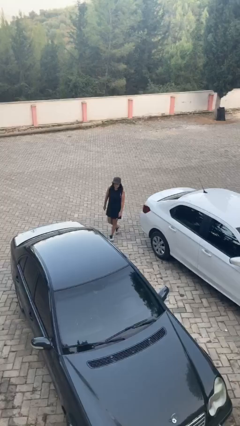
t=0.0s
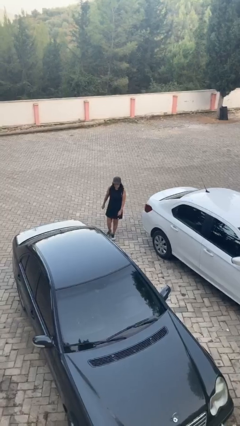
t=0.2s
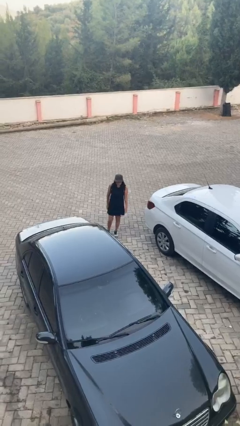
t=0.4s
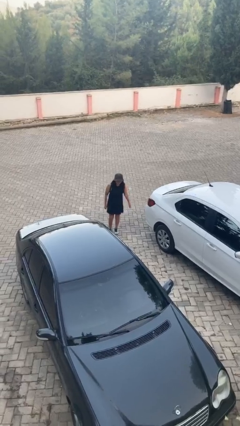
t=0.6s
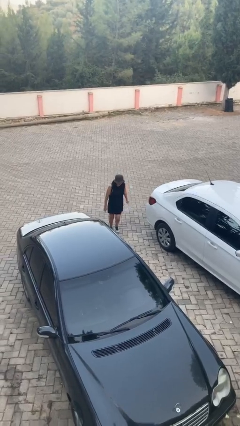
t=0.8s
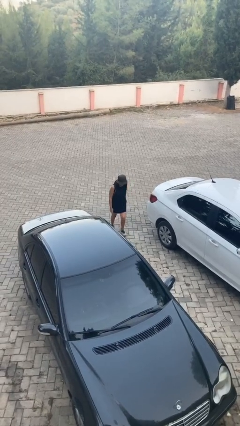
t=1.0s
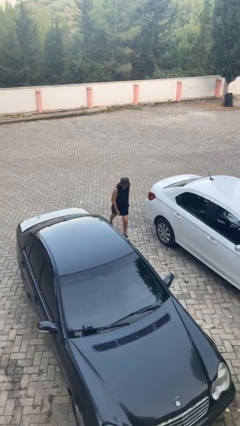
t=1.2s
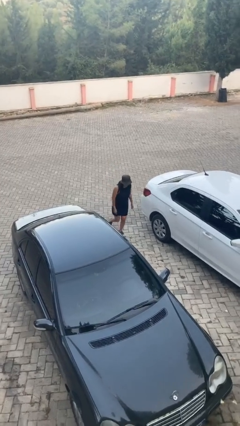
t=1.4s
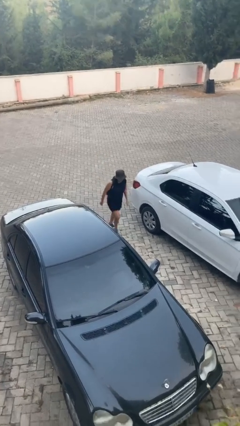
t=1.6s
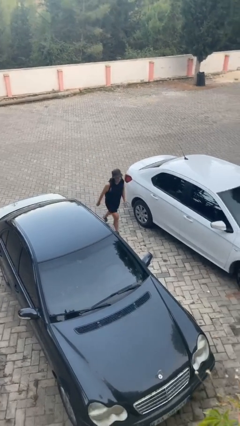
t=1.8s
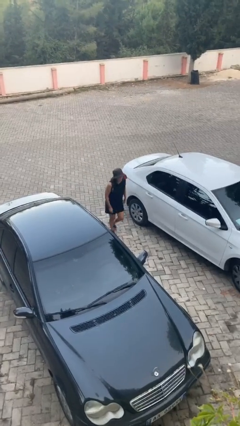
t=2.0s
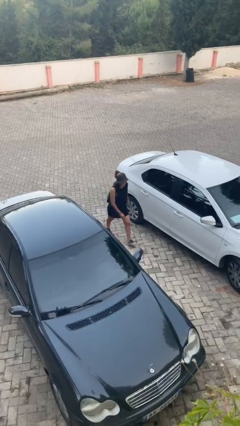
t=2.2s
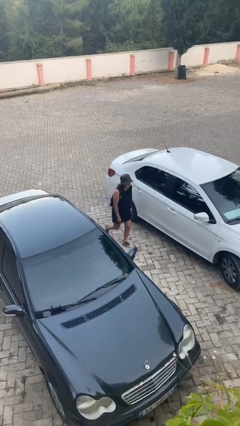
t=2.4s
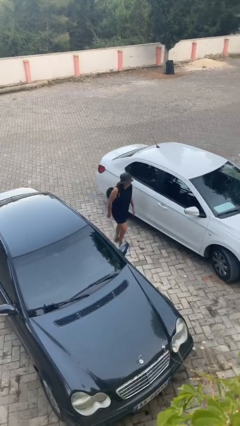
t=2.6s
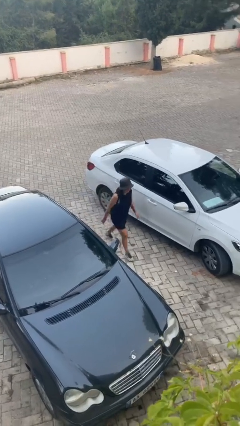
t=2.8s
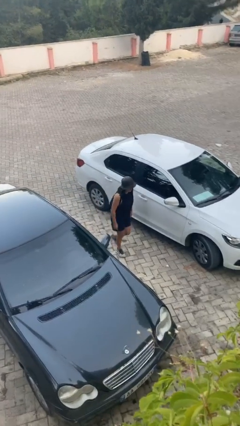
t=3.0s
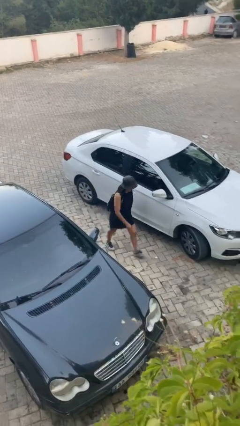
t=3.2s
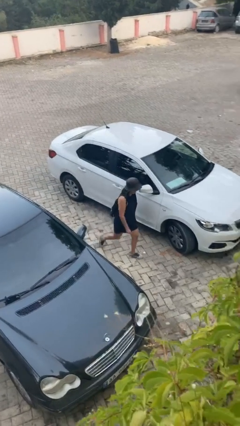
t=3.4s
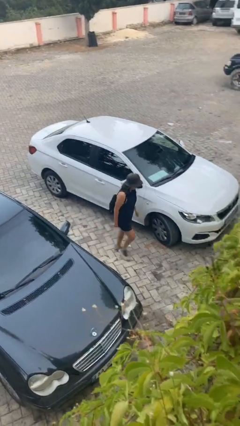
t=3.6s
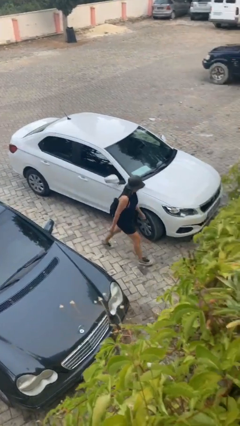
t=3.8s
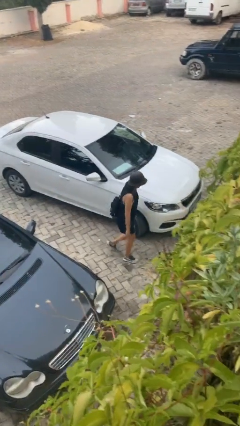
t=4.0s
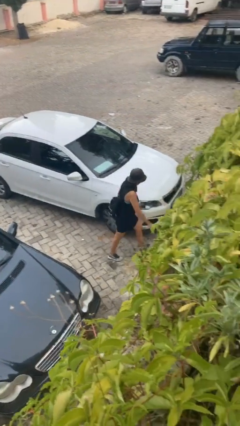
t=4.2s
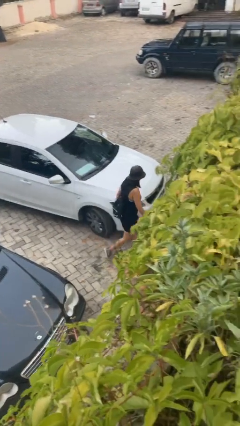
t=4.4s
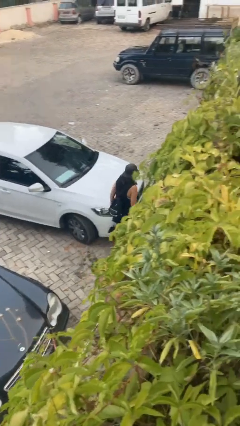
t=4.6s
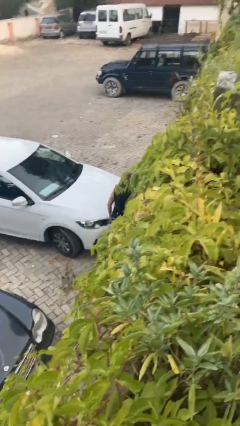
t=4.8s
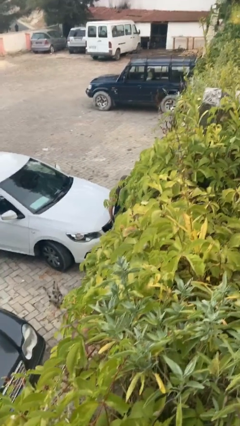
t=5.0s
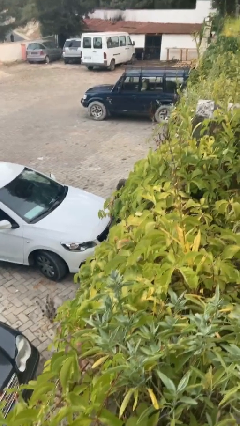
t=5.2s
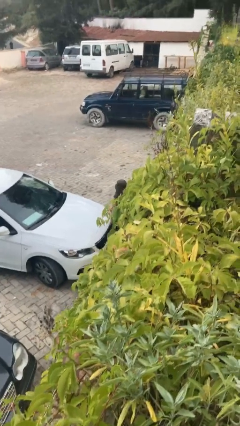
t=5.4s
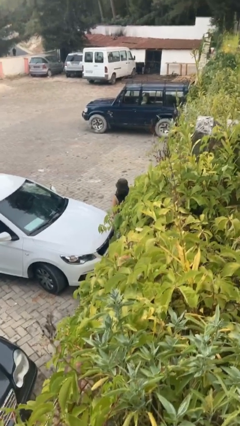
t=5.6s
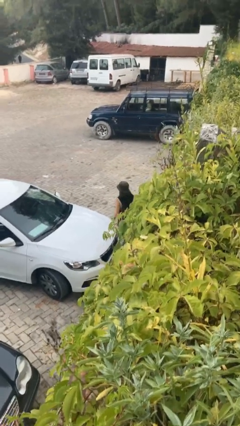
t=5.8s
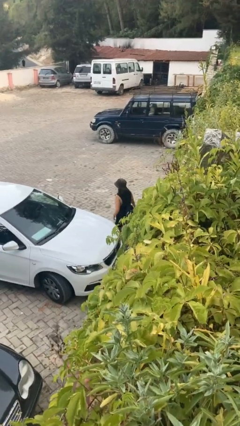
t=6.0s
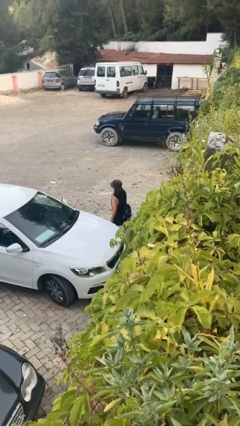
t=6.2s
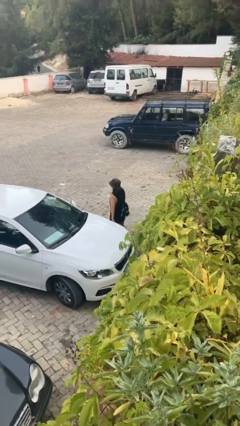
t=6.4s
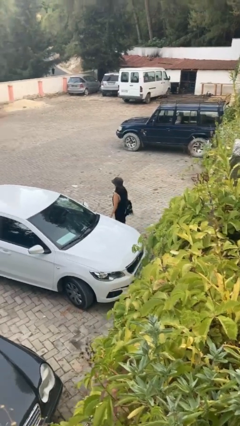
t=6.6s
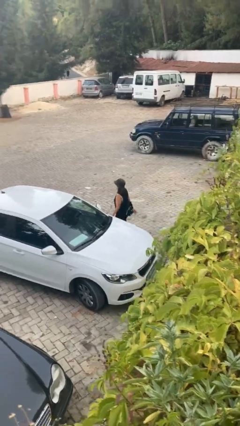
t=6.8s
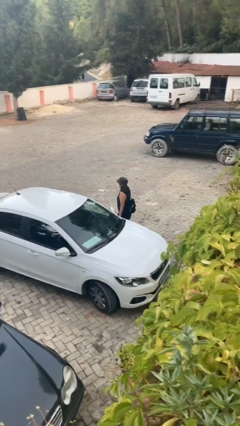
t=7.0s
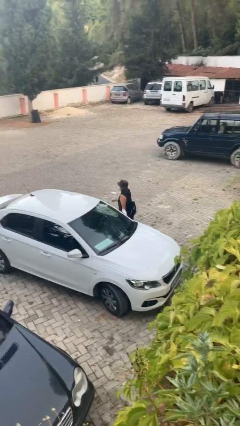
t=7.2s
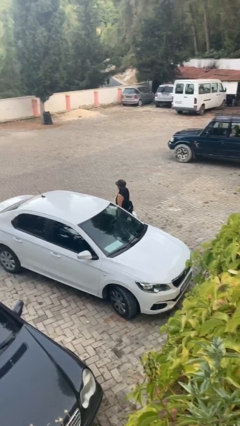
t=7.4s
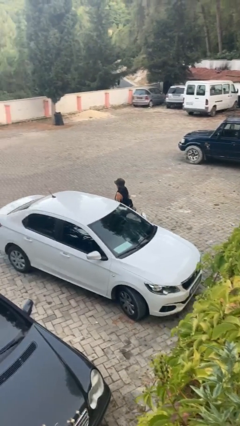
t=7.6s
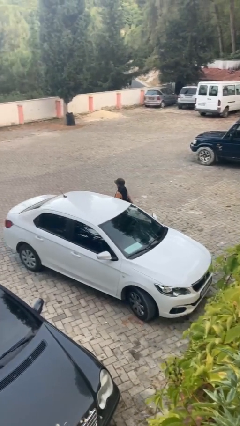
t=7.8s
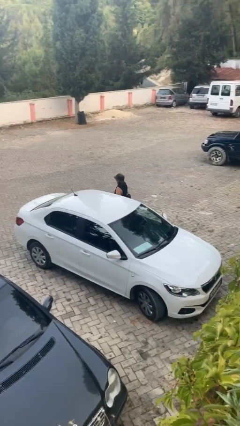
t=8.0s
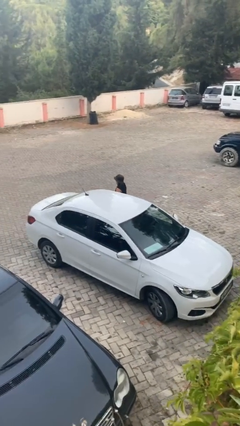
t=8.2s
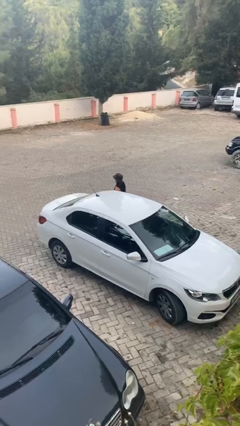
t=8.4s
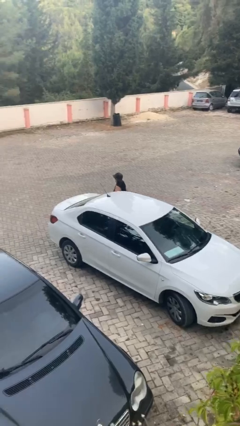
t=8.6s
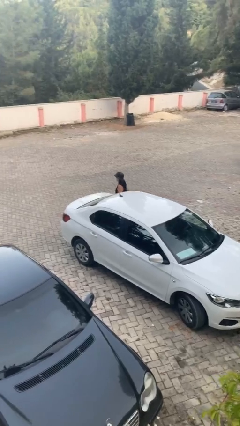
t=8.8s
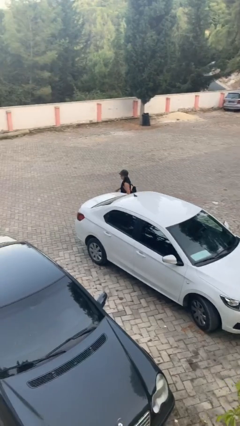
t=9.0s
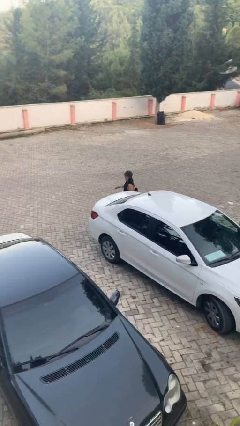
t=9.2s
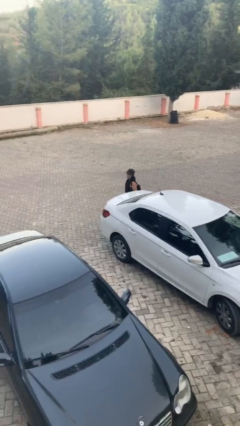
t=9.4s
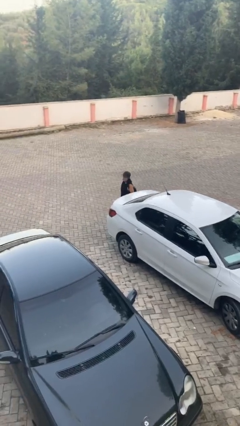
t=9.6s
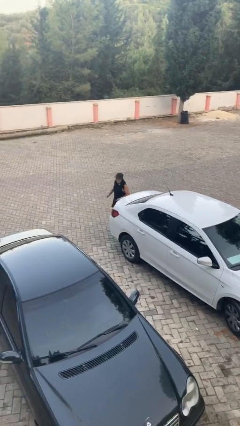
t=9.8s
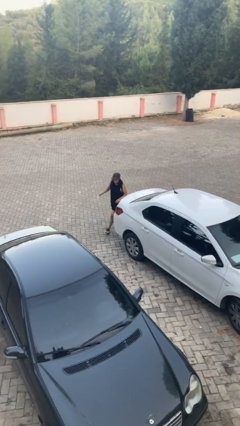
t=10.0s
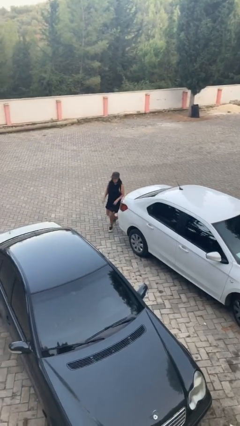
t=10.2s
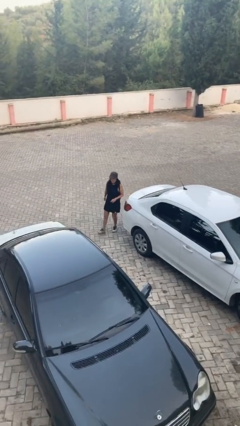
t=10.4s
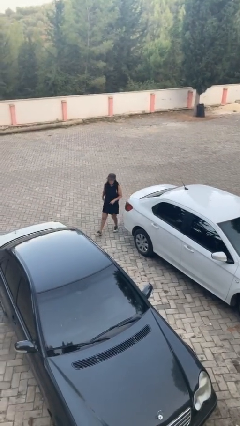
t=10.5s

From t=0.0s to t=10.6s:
person walks around car

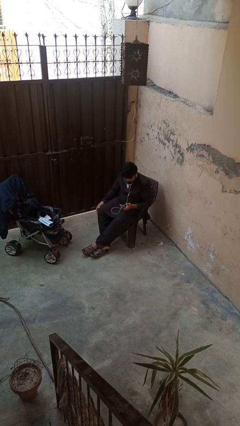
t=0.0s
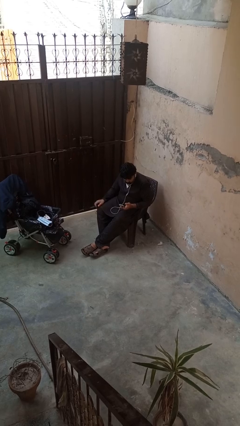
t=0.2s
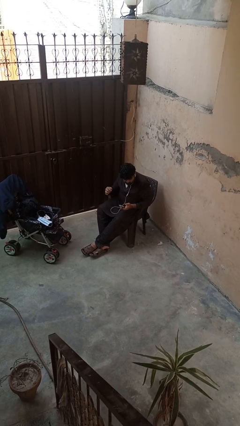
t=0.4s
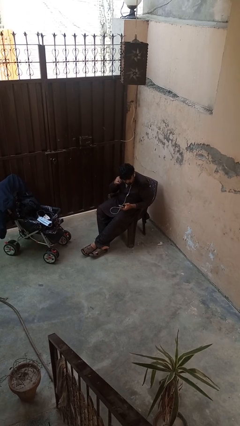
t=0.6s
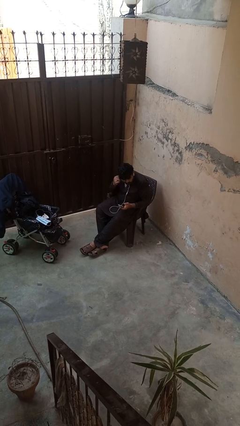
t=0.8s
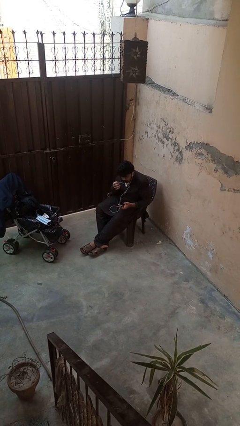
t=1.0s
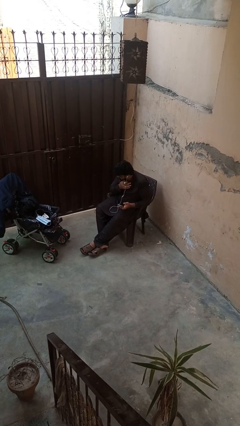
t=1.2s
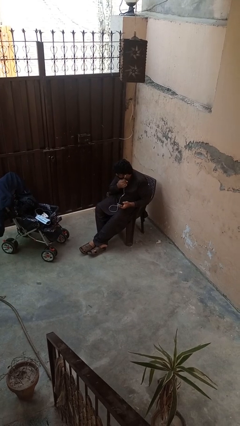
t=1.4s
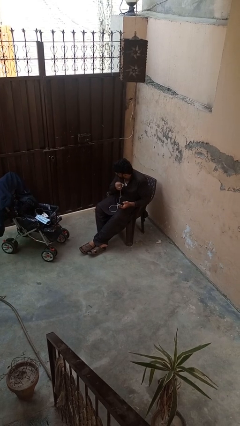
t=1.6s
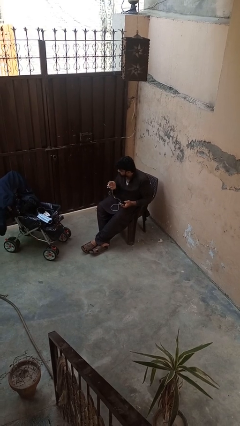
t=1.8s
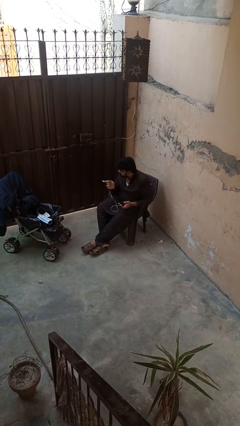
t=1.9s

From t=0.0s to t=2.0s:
person takes off headphones

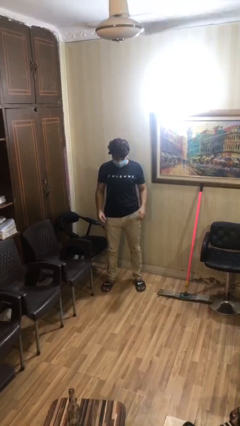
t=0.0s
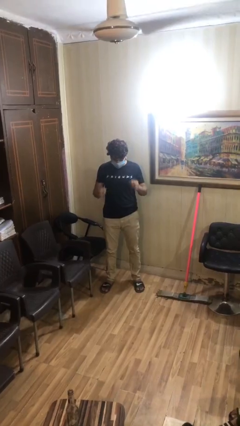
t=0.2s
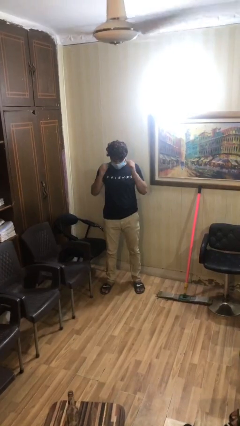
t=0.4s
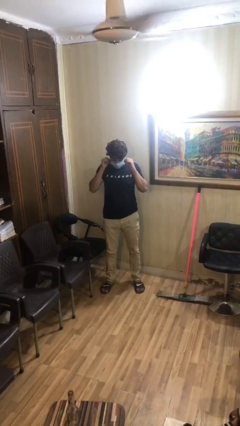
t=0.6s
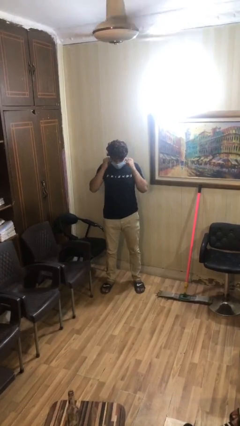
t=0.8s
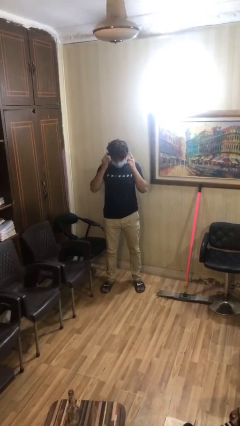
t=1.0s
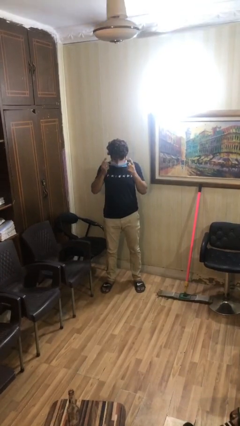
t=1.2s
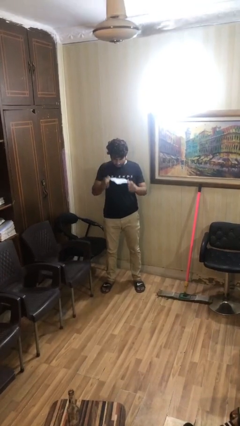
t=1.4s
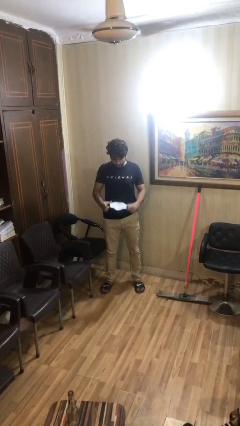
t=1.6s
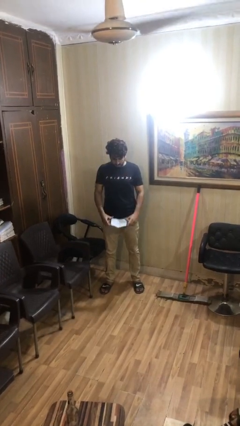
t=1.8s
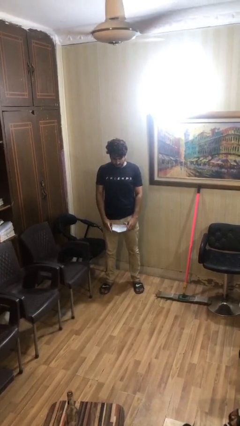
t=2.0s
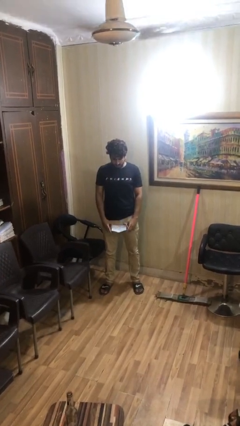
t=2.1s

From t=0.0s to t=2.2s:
person takes off facemask

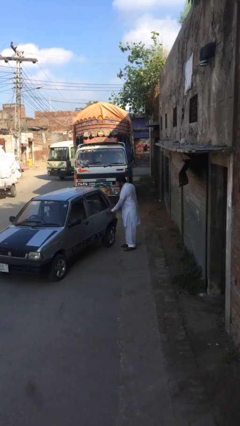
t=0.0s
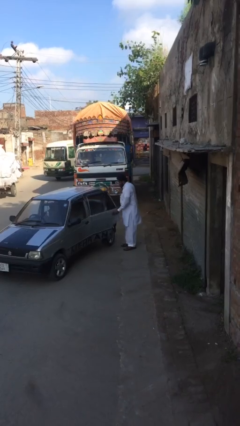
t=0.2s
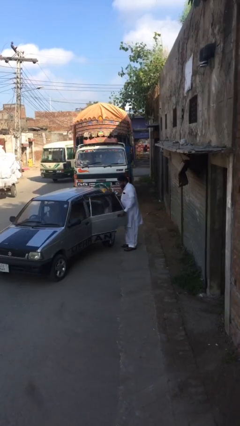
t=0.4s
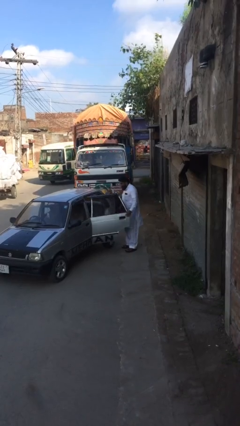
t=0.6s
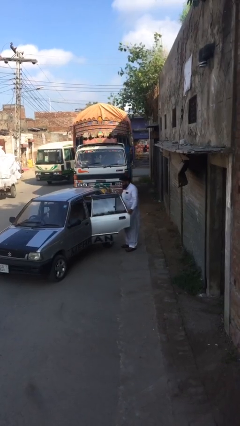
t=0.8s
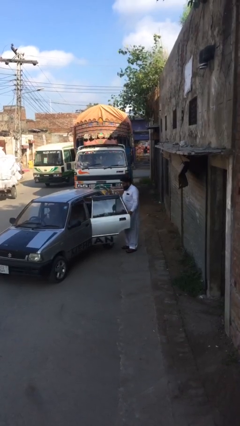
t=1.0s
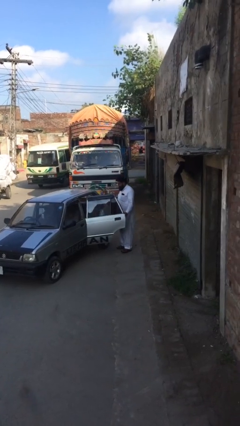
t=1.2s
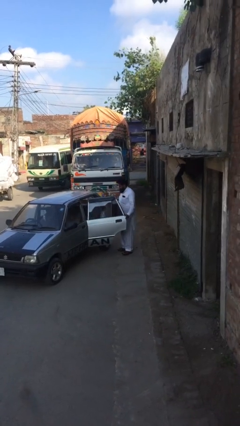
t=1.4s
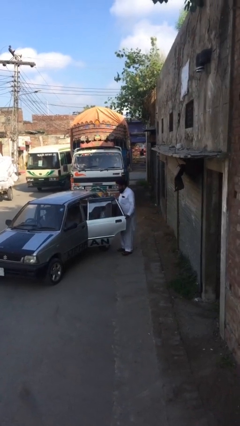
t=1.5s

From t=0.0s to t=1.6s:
person opens car door

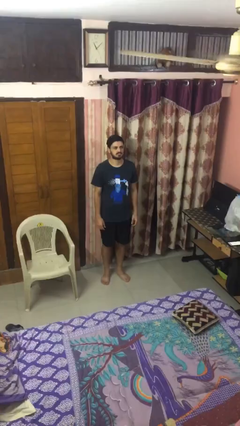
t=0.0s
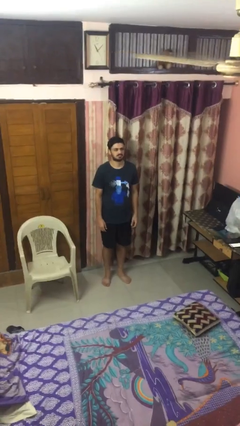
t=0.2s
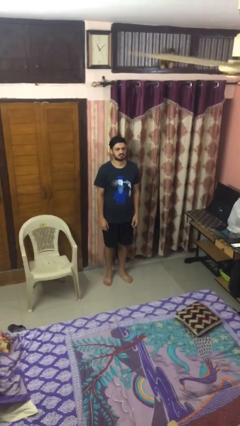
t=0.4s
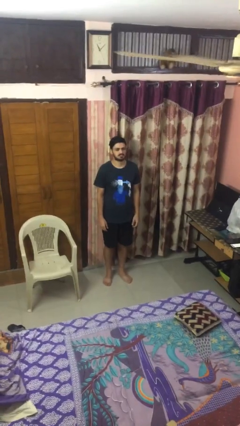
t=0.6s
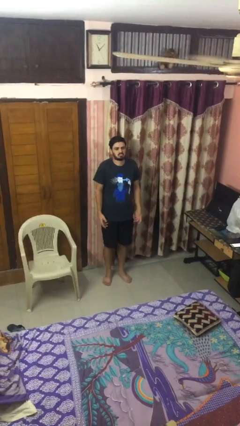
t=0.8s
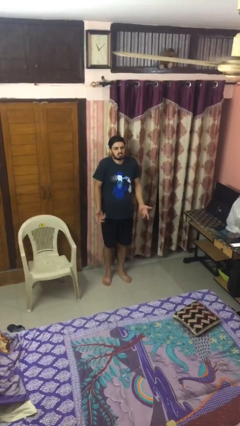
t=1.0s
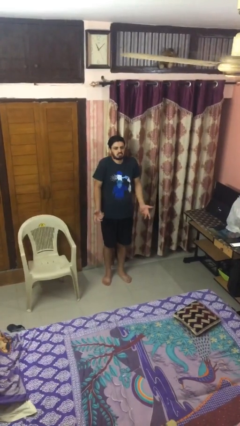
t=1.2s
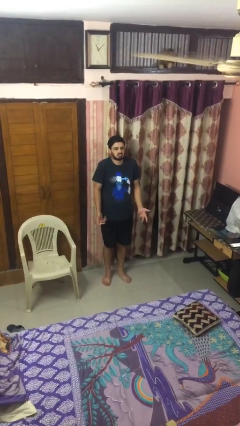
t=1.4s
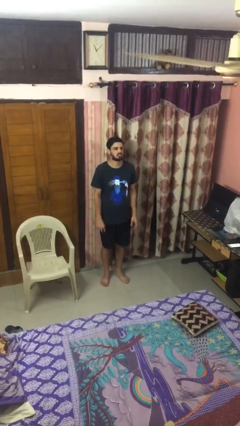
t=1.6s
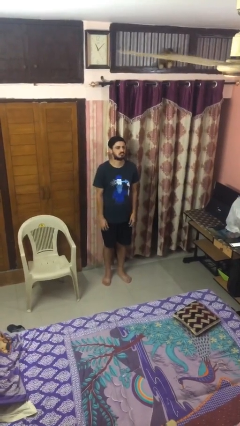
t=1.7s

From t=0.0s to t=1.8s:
person shrugs
